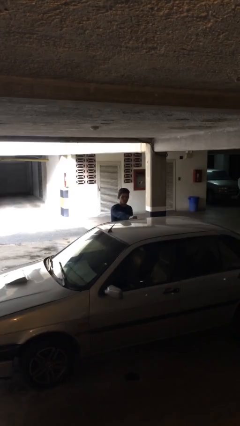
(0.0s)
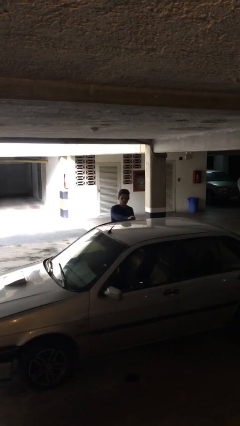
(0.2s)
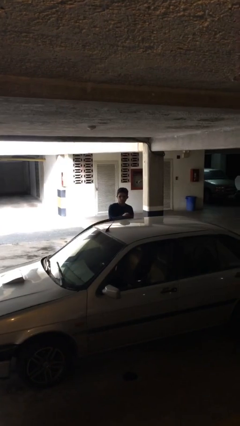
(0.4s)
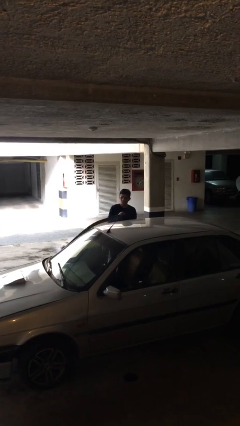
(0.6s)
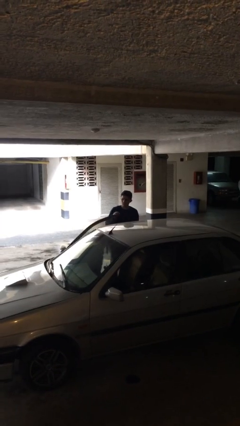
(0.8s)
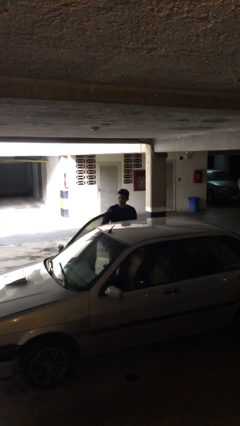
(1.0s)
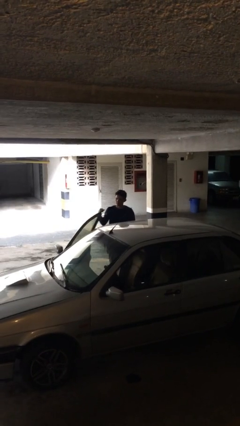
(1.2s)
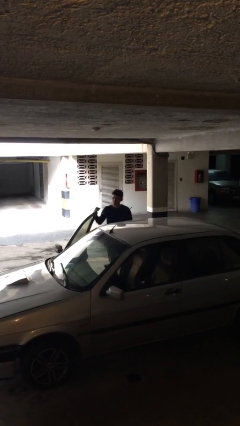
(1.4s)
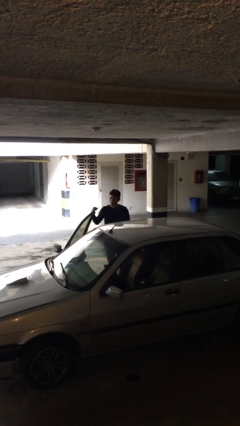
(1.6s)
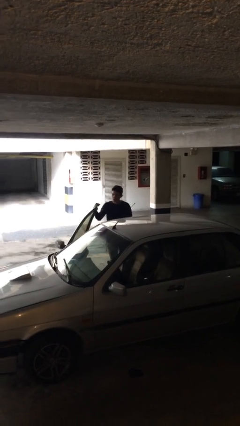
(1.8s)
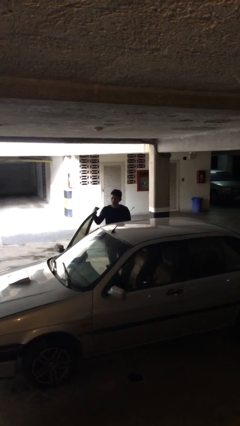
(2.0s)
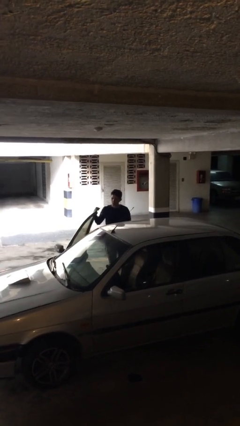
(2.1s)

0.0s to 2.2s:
person opens car door

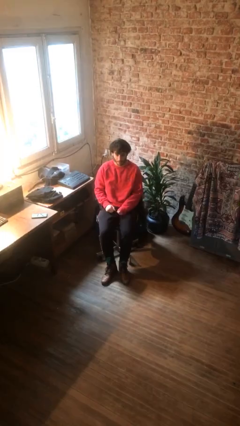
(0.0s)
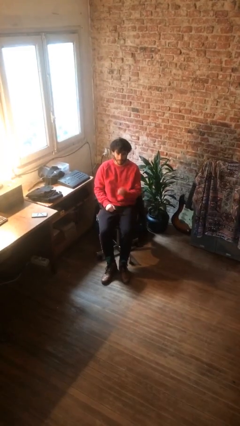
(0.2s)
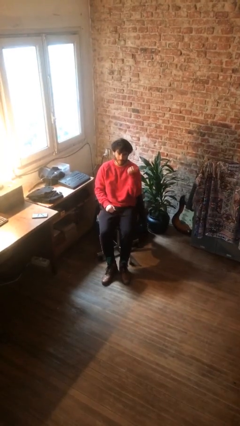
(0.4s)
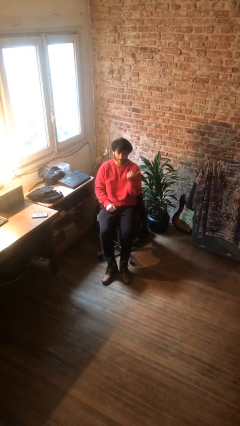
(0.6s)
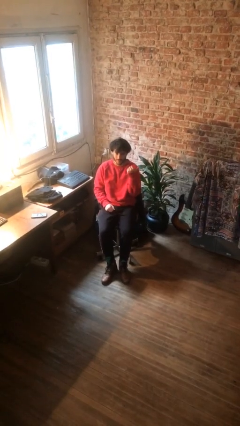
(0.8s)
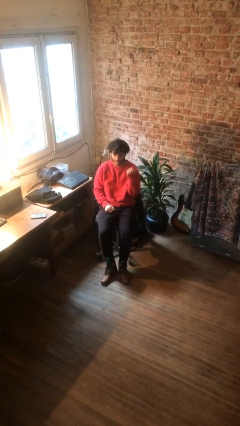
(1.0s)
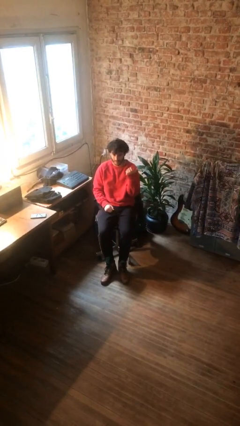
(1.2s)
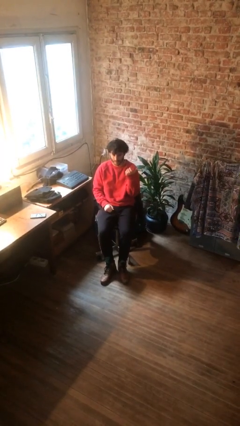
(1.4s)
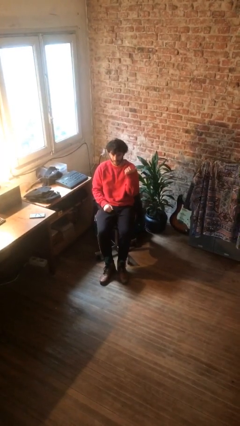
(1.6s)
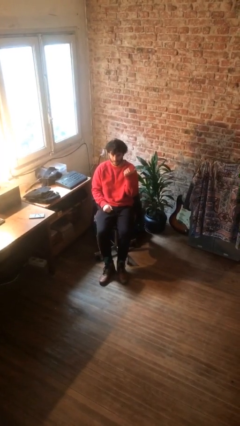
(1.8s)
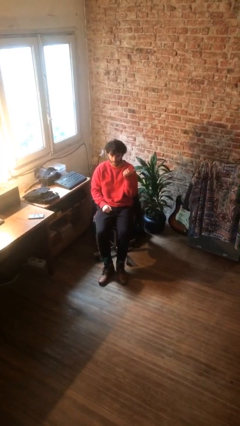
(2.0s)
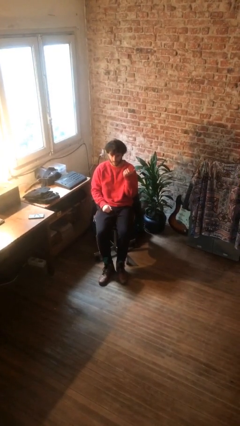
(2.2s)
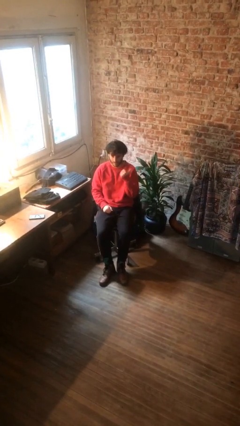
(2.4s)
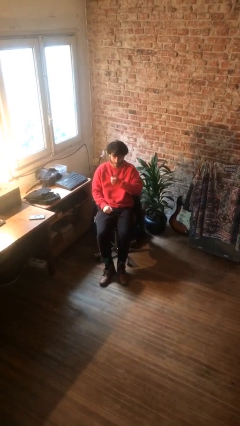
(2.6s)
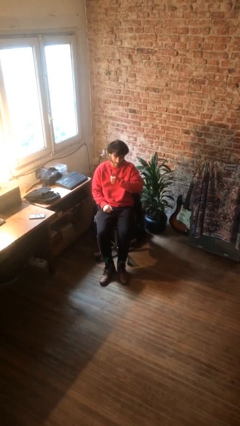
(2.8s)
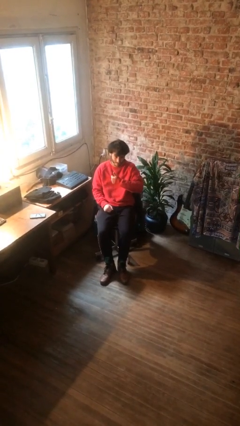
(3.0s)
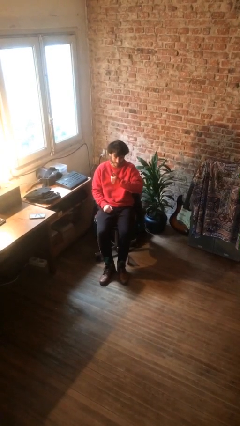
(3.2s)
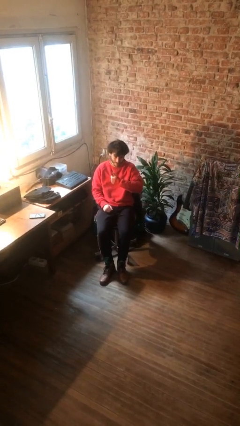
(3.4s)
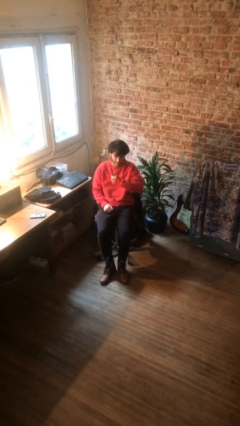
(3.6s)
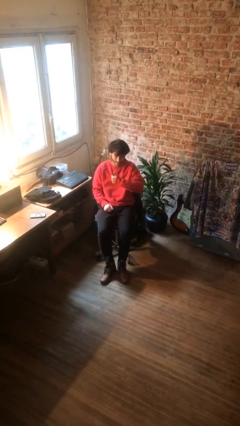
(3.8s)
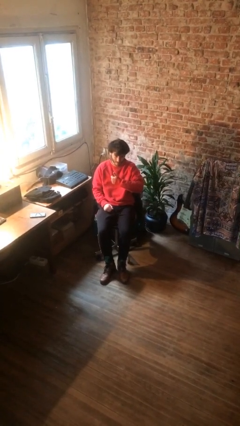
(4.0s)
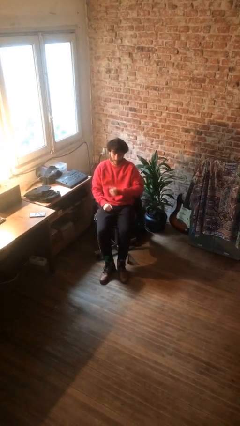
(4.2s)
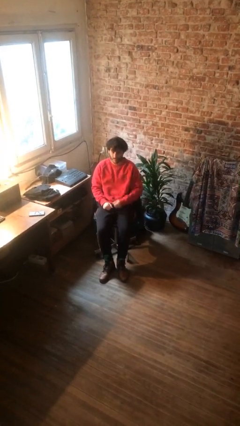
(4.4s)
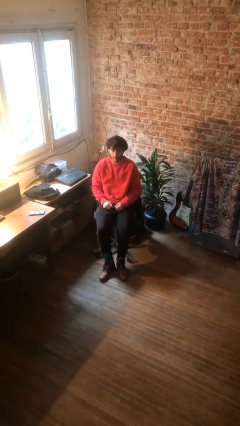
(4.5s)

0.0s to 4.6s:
person gestures thumbs up

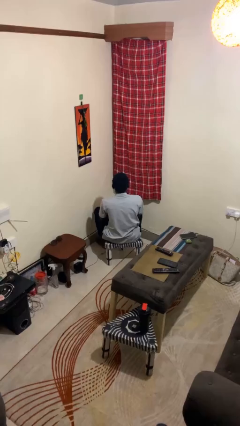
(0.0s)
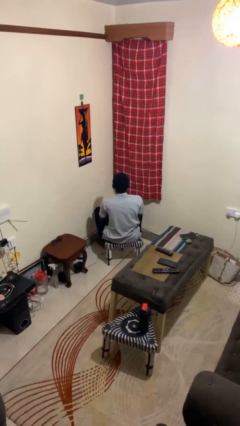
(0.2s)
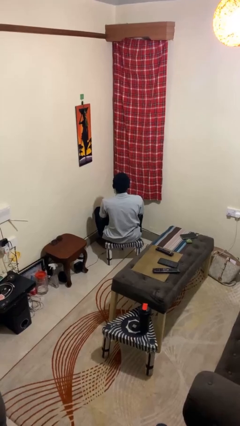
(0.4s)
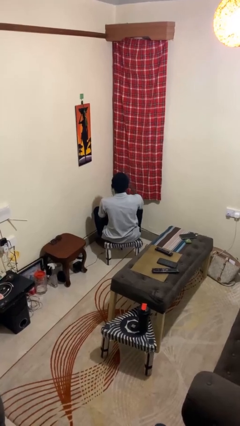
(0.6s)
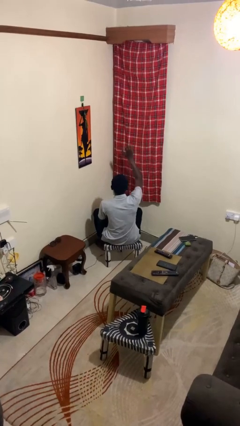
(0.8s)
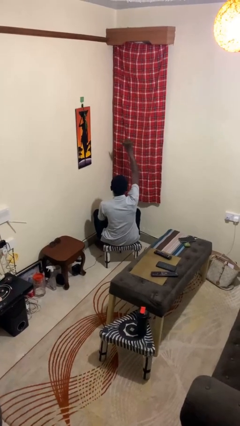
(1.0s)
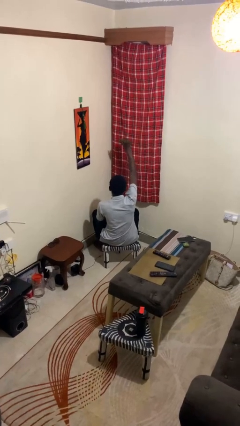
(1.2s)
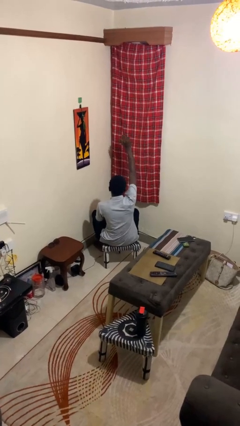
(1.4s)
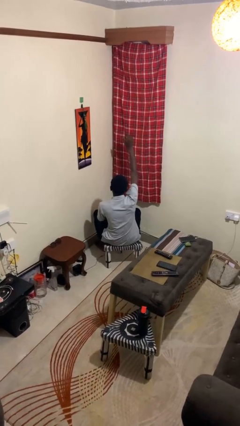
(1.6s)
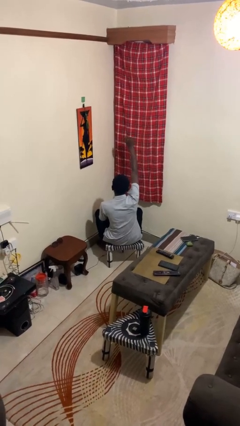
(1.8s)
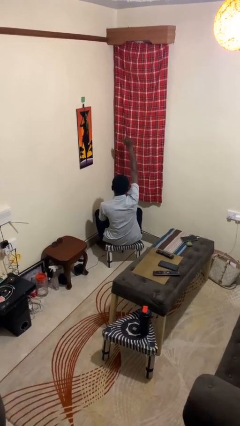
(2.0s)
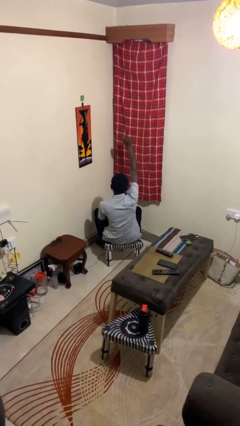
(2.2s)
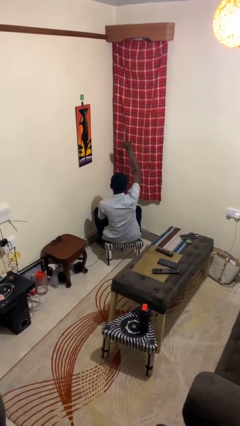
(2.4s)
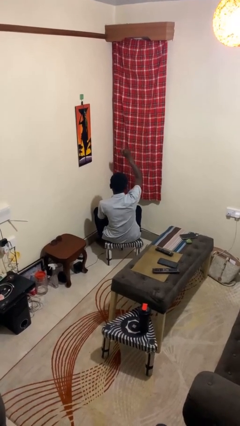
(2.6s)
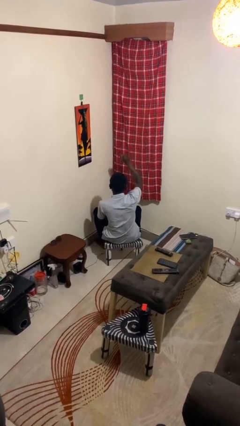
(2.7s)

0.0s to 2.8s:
person gestures come here

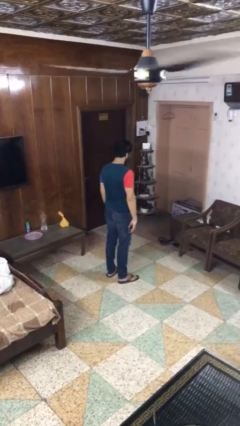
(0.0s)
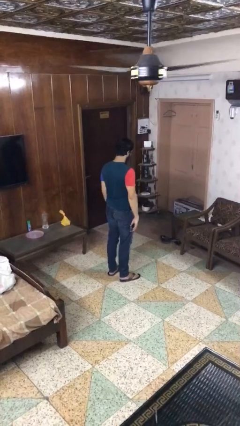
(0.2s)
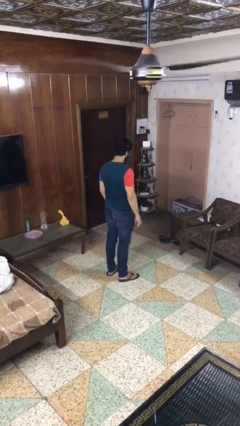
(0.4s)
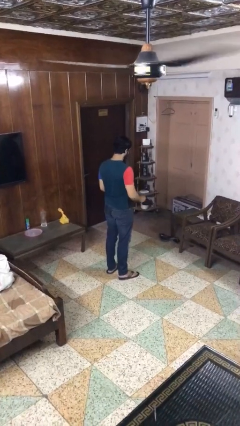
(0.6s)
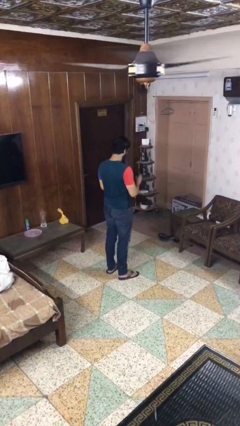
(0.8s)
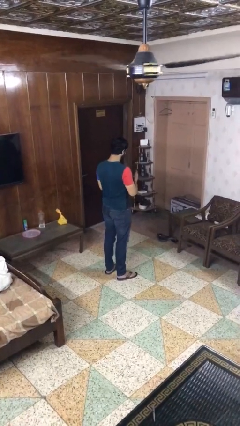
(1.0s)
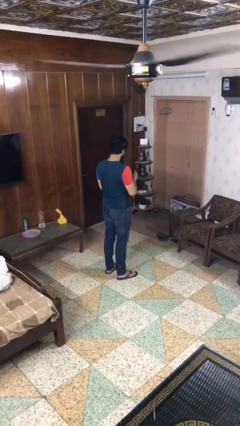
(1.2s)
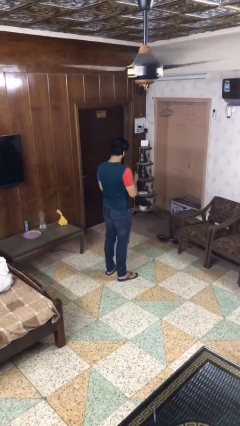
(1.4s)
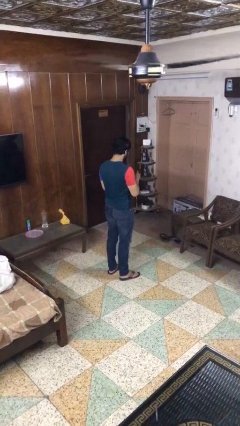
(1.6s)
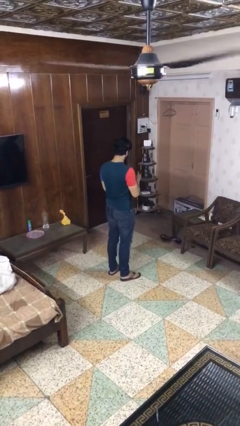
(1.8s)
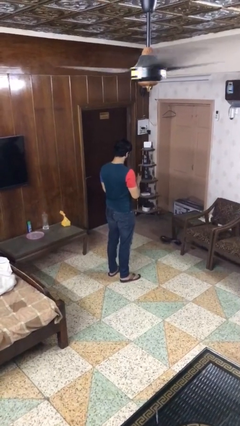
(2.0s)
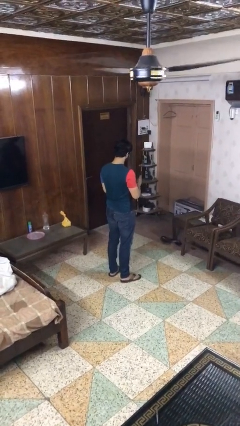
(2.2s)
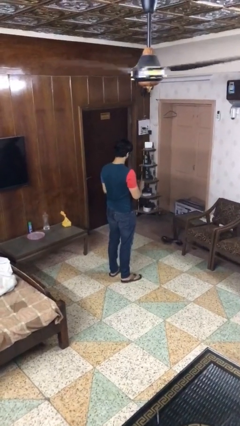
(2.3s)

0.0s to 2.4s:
person clips fingernails

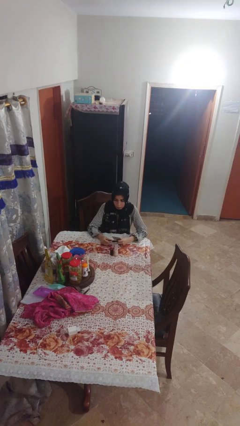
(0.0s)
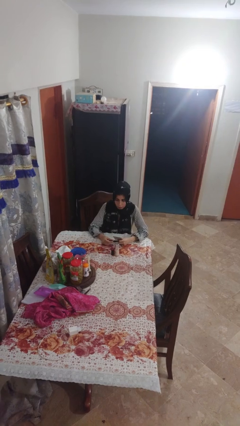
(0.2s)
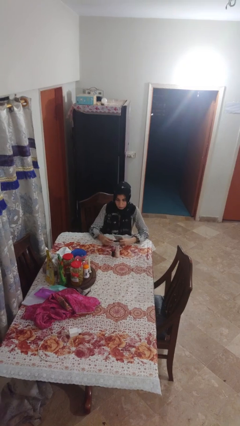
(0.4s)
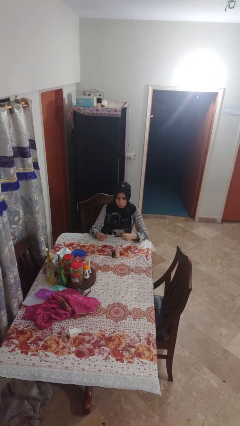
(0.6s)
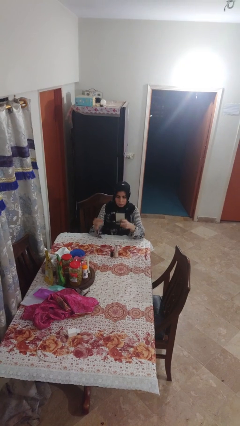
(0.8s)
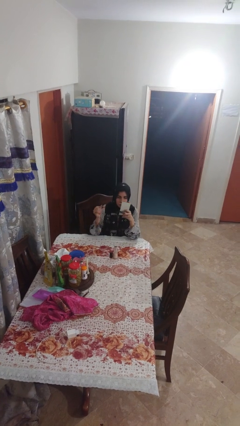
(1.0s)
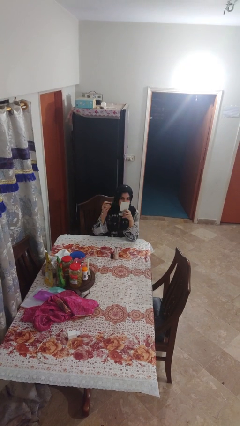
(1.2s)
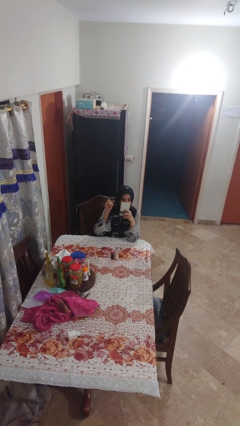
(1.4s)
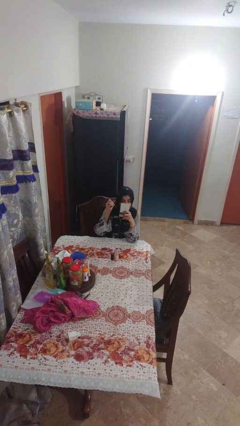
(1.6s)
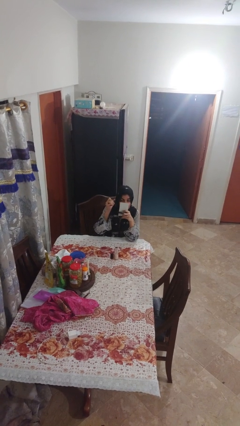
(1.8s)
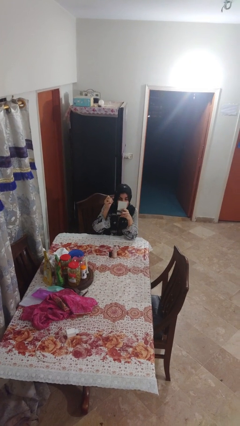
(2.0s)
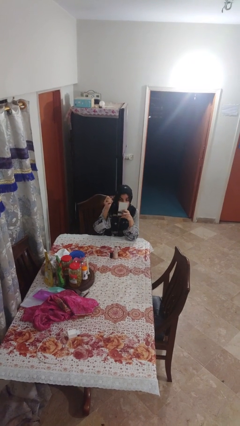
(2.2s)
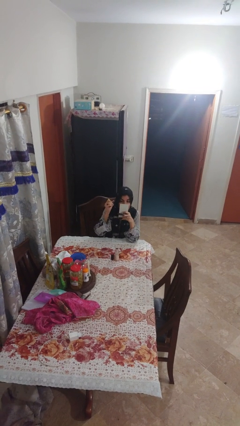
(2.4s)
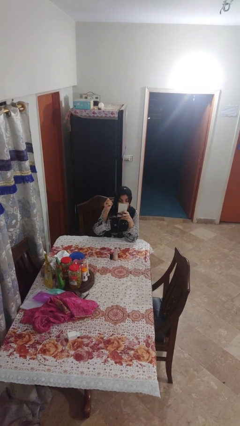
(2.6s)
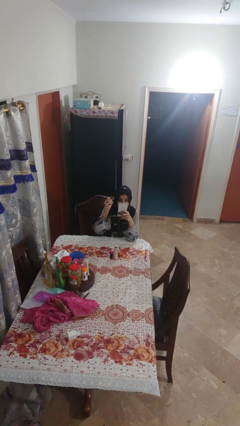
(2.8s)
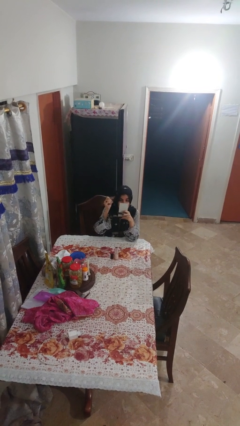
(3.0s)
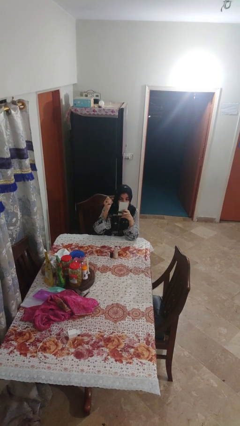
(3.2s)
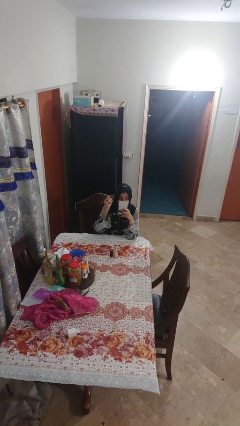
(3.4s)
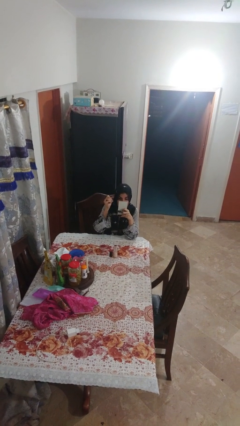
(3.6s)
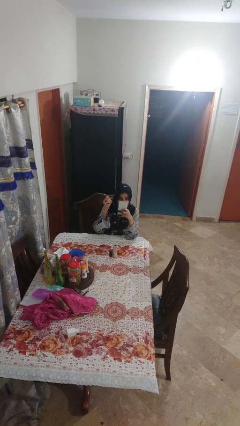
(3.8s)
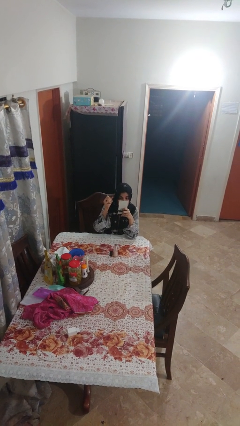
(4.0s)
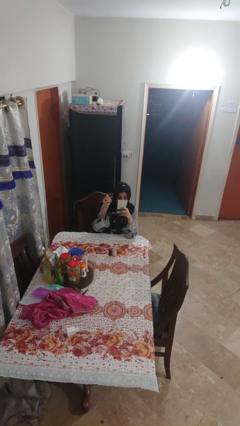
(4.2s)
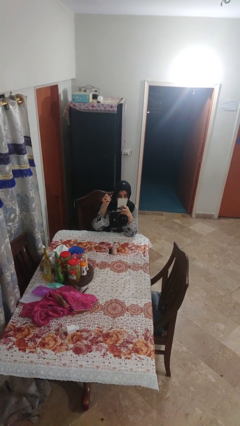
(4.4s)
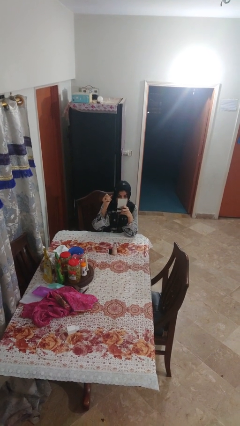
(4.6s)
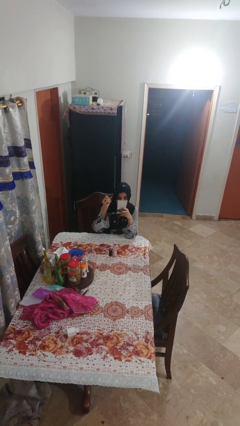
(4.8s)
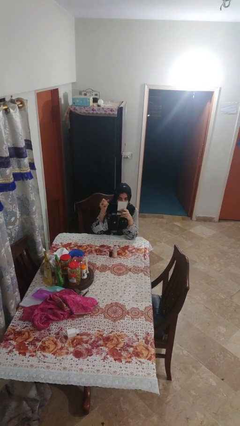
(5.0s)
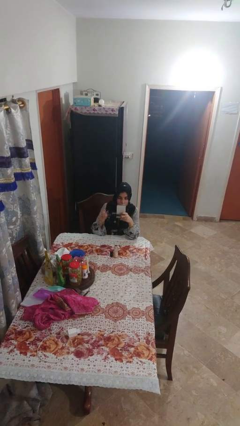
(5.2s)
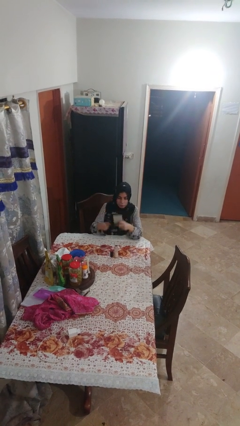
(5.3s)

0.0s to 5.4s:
person applies eye makeup

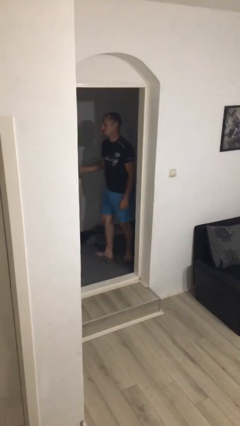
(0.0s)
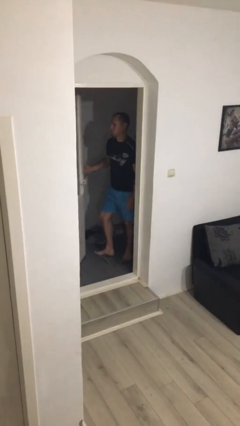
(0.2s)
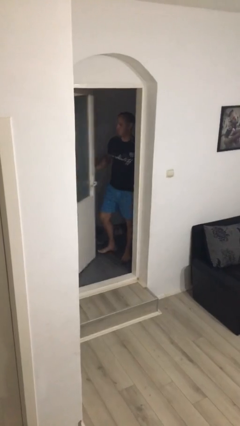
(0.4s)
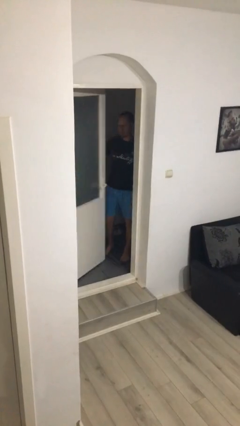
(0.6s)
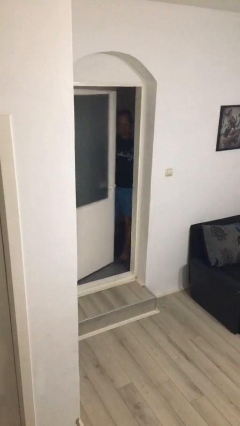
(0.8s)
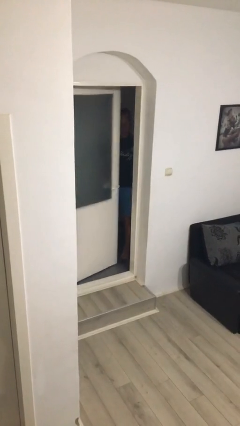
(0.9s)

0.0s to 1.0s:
person exits scene through structure
